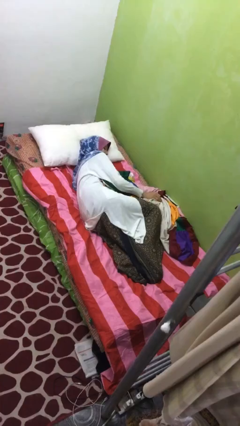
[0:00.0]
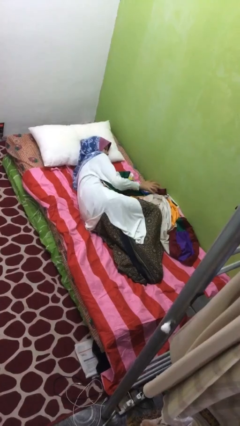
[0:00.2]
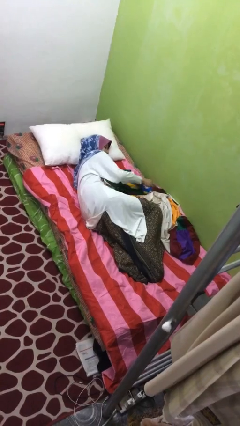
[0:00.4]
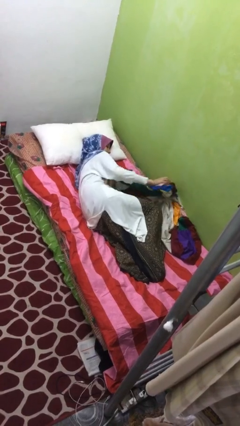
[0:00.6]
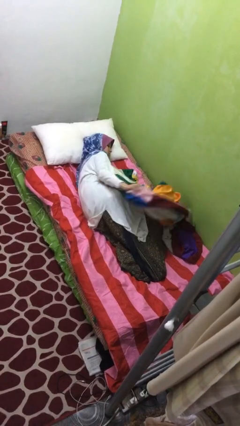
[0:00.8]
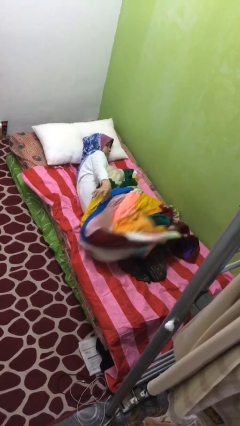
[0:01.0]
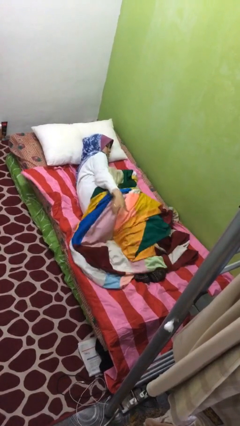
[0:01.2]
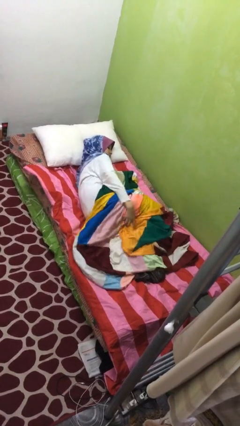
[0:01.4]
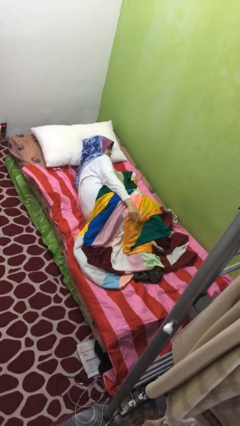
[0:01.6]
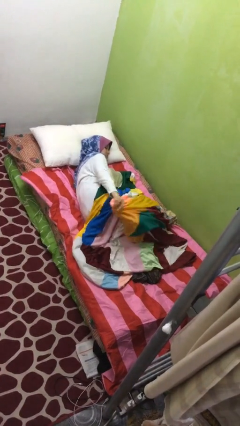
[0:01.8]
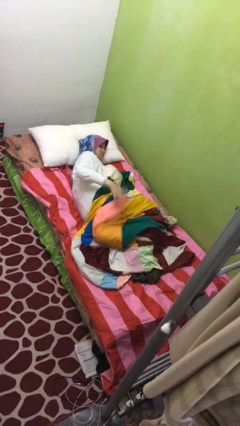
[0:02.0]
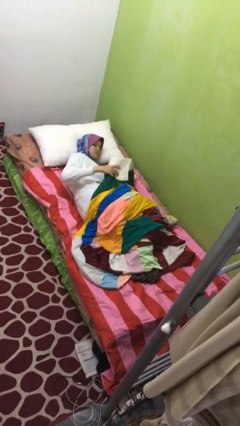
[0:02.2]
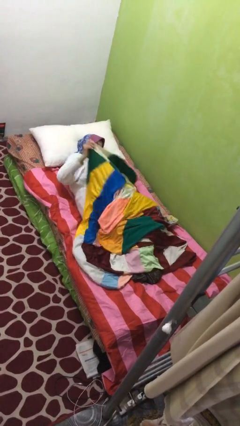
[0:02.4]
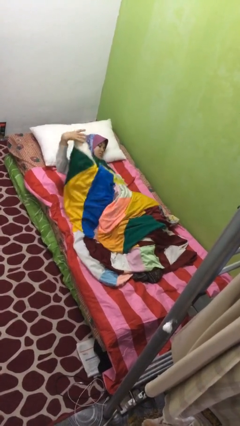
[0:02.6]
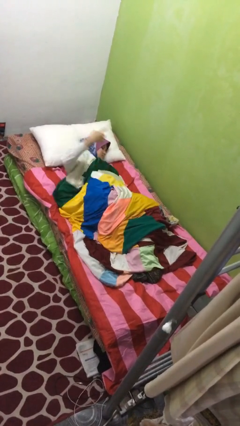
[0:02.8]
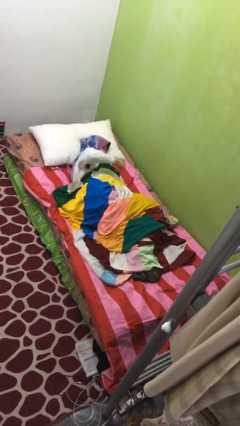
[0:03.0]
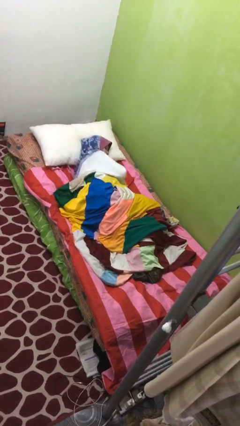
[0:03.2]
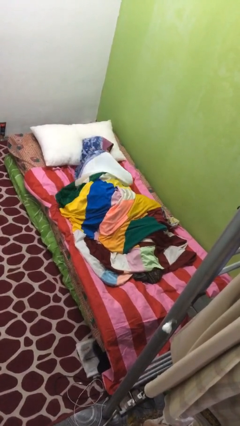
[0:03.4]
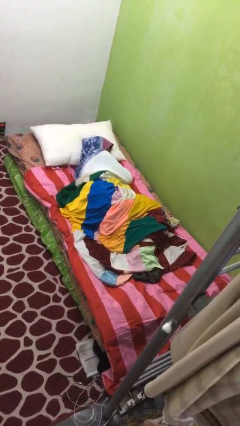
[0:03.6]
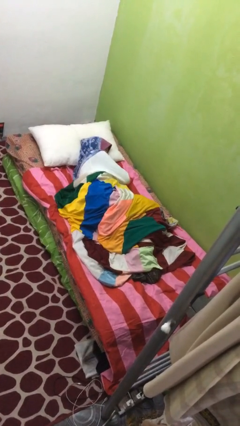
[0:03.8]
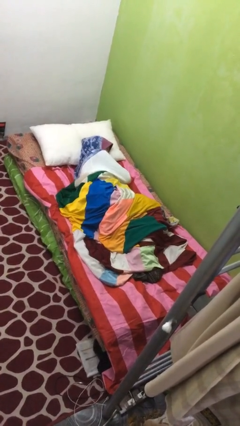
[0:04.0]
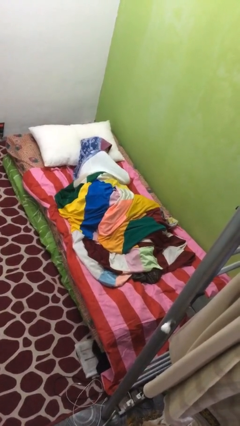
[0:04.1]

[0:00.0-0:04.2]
person covers with blanket

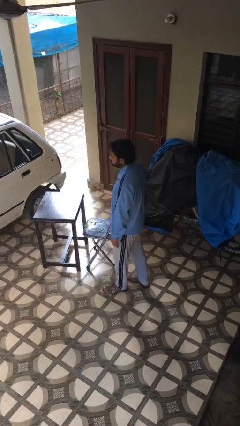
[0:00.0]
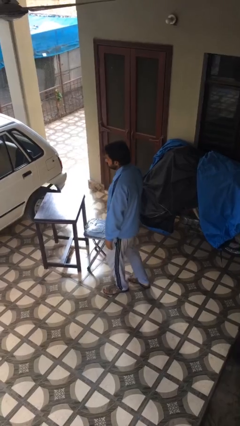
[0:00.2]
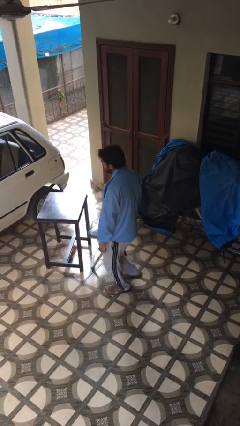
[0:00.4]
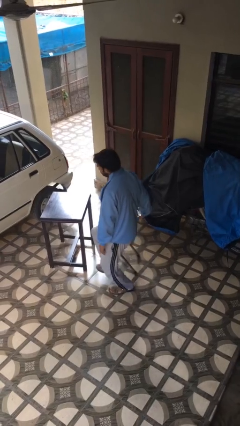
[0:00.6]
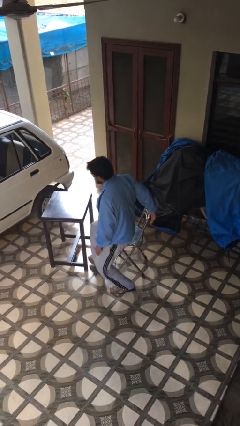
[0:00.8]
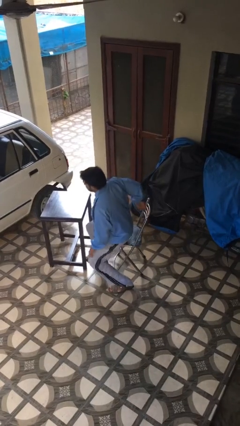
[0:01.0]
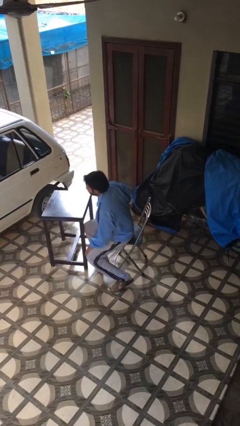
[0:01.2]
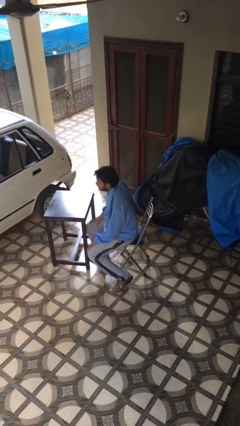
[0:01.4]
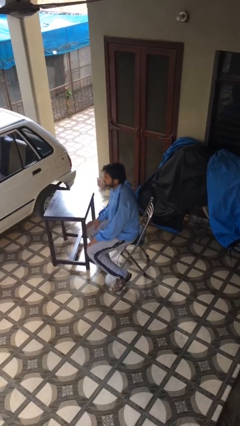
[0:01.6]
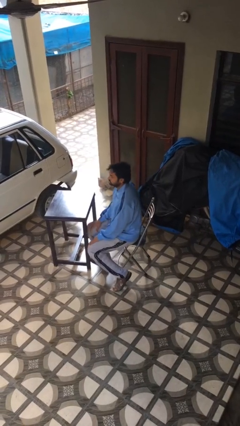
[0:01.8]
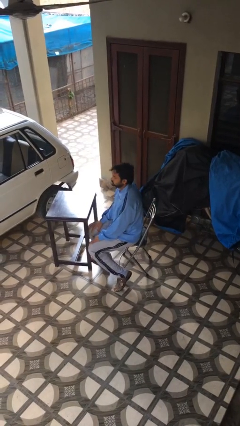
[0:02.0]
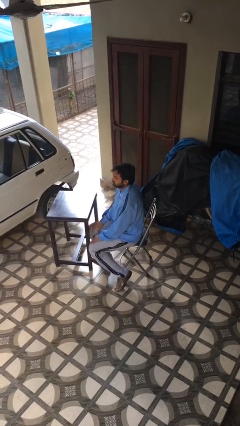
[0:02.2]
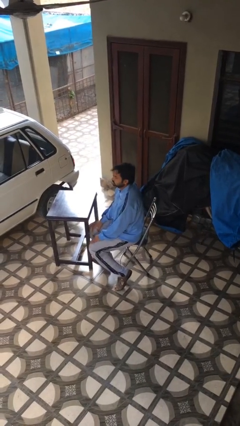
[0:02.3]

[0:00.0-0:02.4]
person sits down

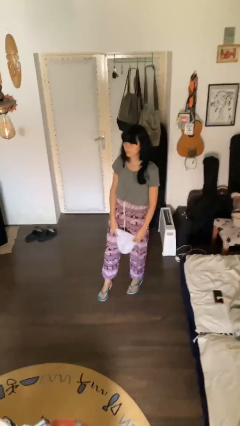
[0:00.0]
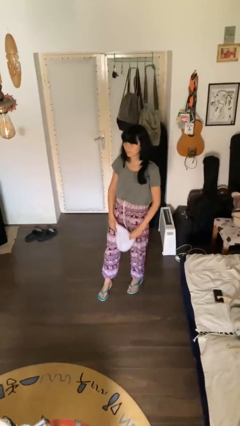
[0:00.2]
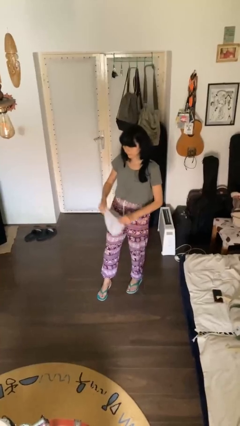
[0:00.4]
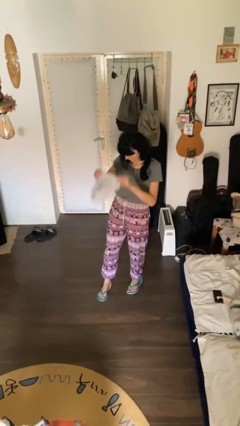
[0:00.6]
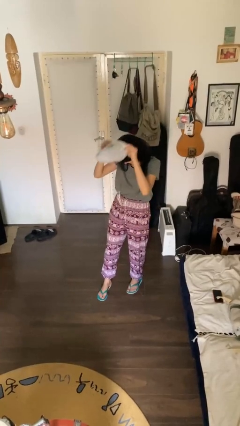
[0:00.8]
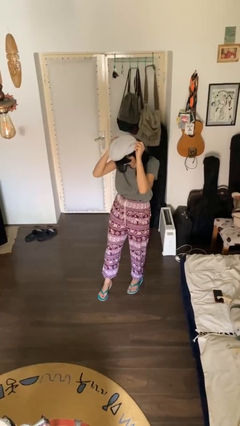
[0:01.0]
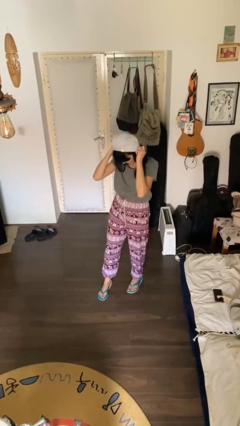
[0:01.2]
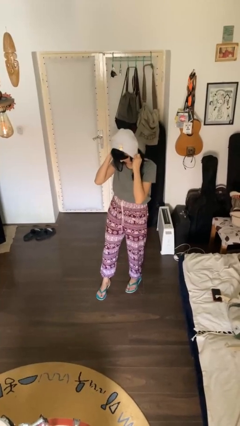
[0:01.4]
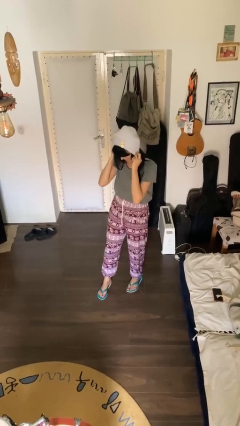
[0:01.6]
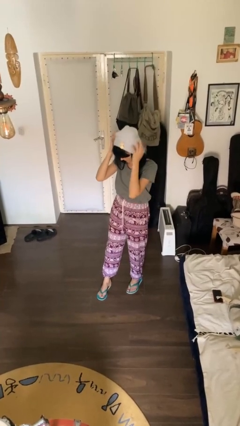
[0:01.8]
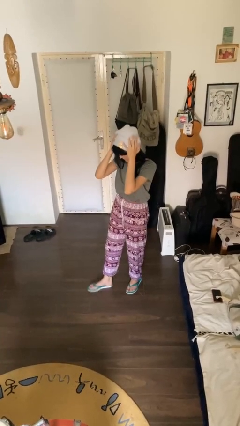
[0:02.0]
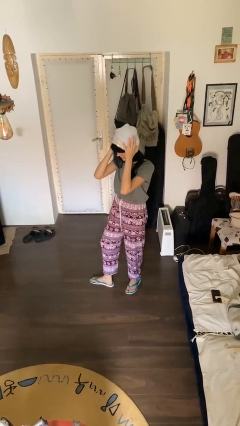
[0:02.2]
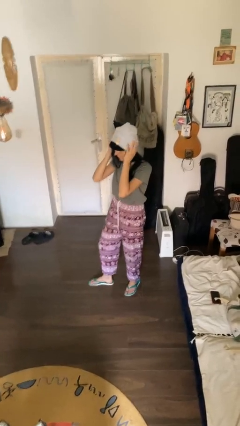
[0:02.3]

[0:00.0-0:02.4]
person puts on hat

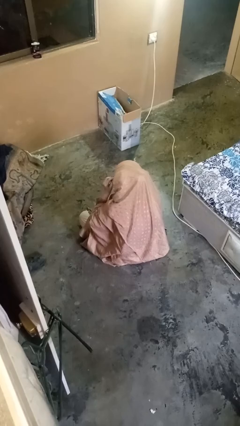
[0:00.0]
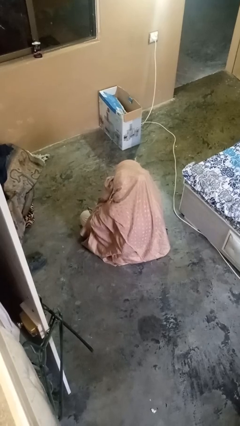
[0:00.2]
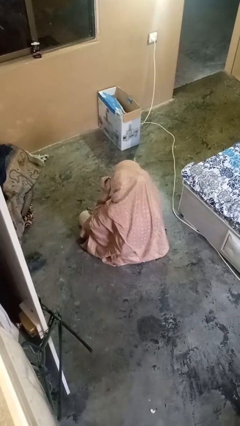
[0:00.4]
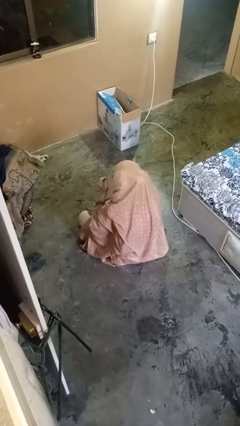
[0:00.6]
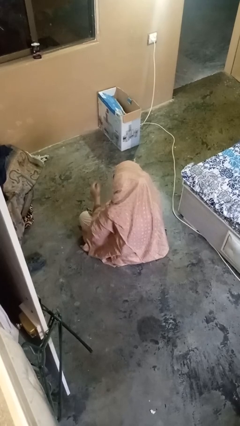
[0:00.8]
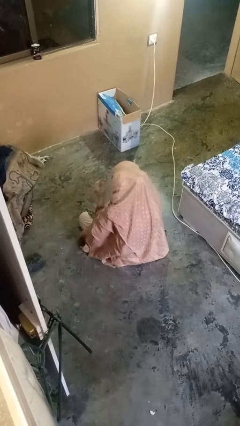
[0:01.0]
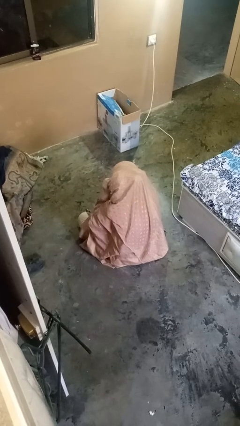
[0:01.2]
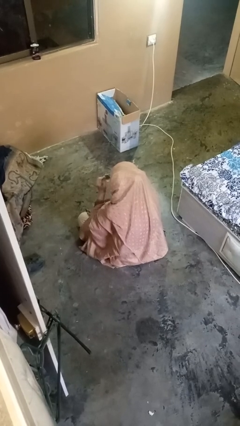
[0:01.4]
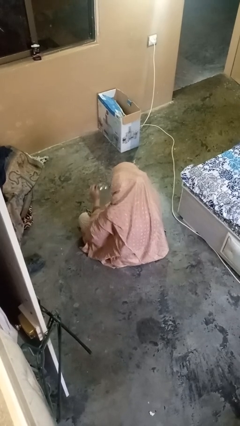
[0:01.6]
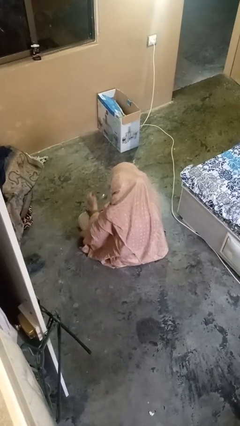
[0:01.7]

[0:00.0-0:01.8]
person takes off glasses

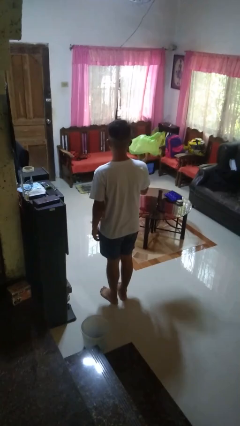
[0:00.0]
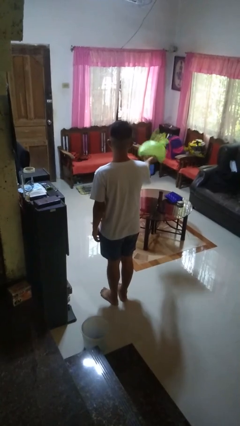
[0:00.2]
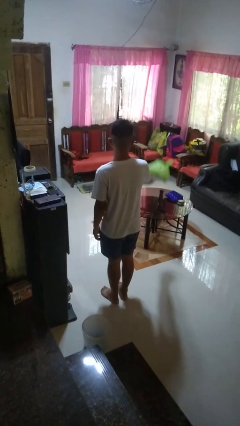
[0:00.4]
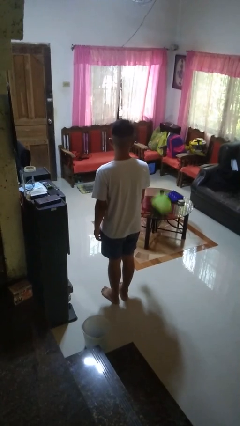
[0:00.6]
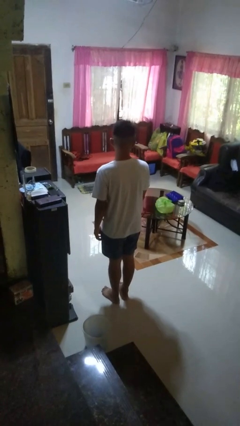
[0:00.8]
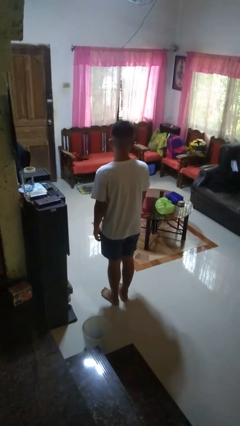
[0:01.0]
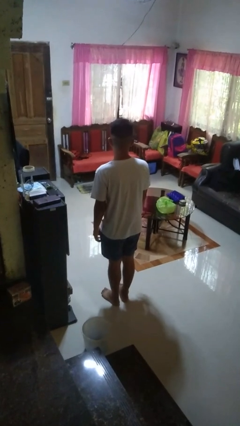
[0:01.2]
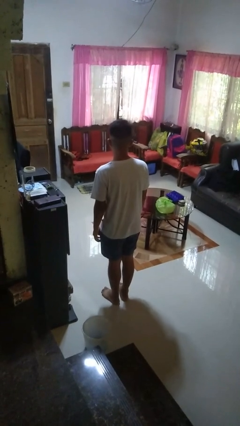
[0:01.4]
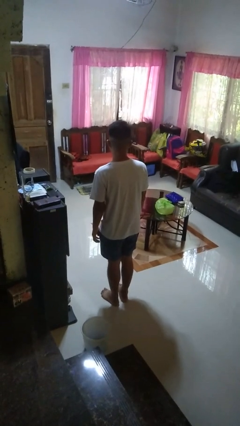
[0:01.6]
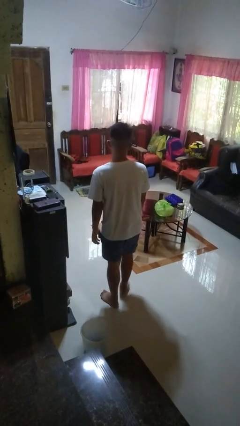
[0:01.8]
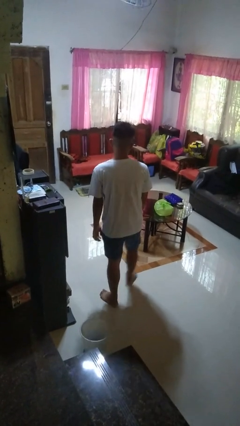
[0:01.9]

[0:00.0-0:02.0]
person throws object on table

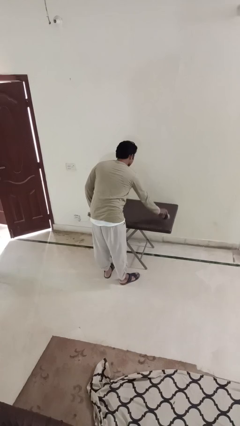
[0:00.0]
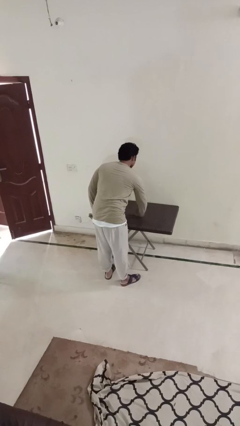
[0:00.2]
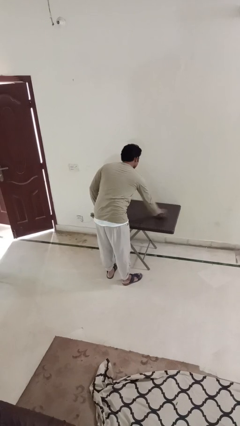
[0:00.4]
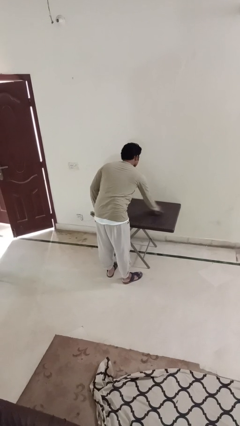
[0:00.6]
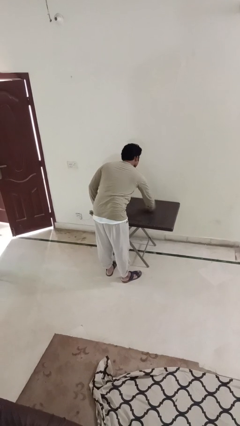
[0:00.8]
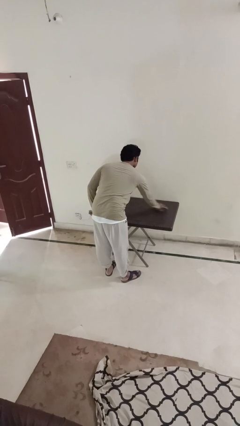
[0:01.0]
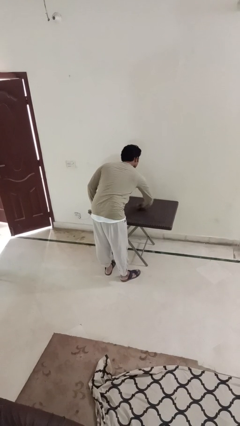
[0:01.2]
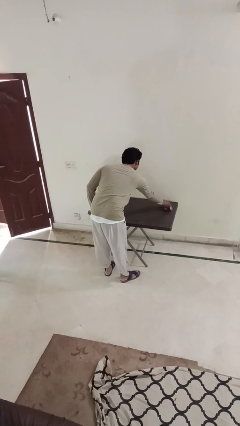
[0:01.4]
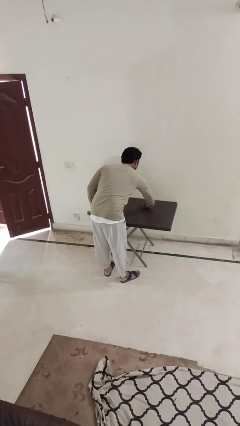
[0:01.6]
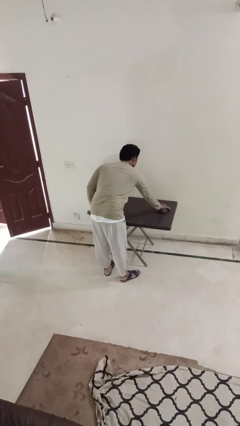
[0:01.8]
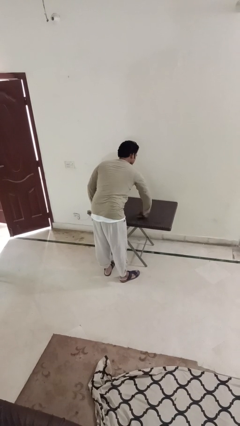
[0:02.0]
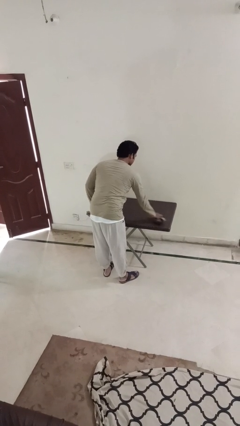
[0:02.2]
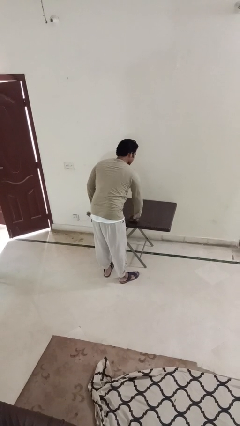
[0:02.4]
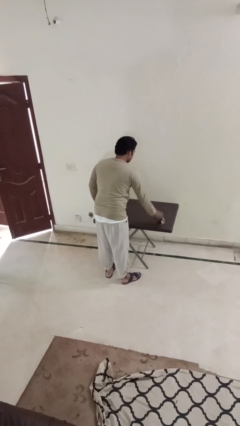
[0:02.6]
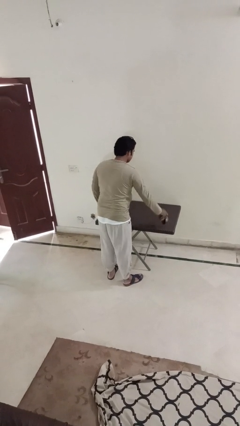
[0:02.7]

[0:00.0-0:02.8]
person cleans table with rag

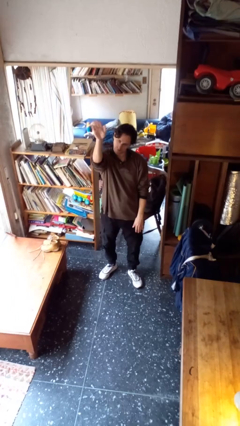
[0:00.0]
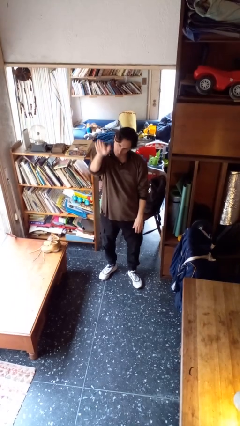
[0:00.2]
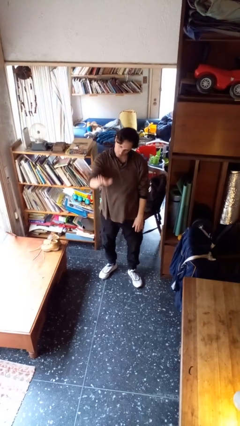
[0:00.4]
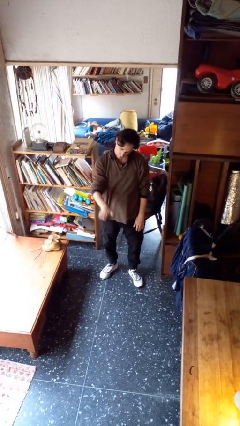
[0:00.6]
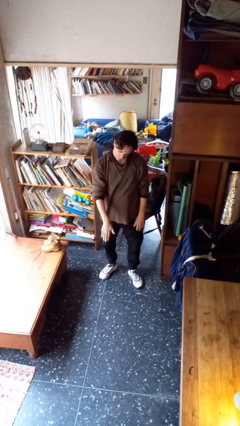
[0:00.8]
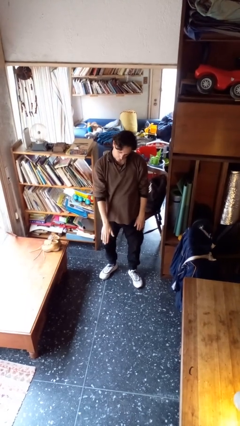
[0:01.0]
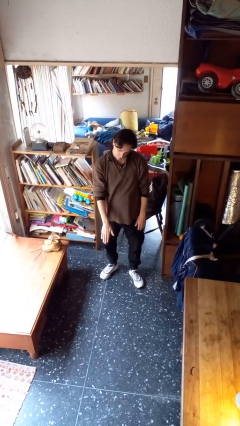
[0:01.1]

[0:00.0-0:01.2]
person gestures swipe down

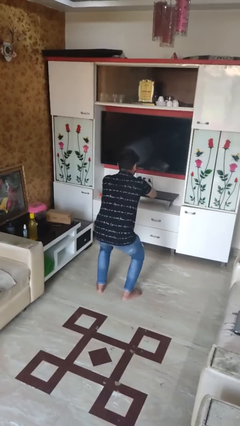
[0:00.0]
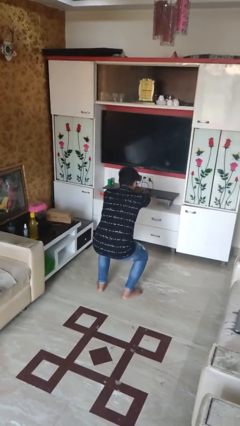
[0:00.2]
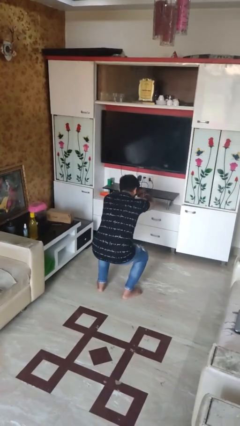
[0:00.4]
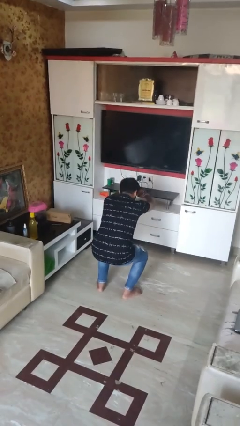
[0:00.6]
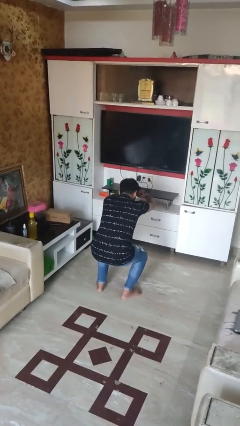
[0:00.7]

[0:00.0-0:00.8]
person squats
